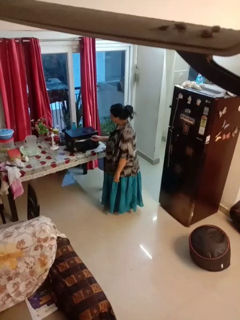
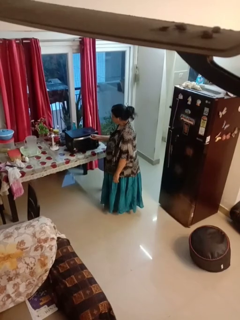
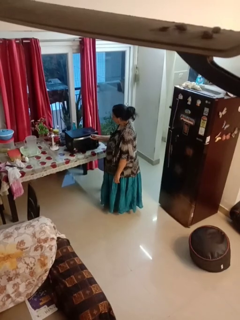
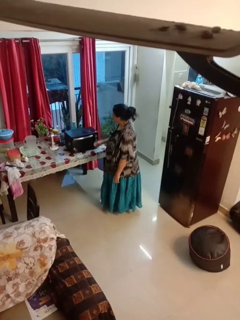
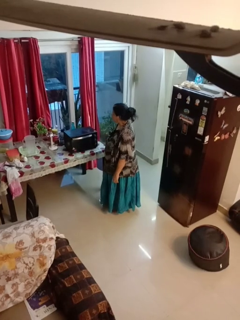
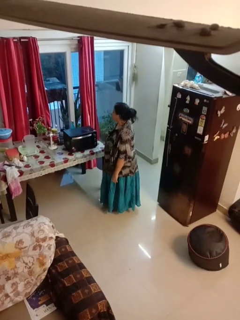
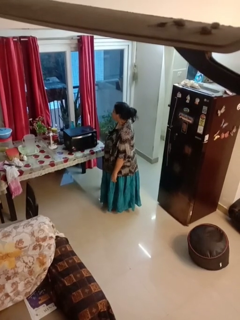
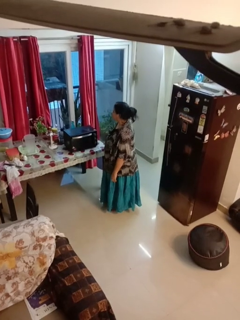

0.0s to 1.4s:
person closes microwave

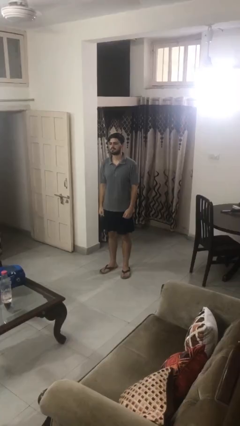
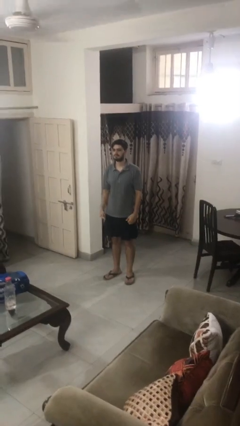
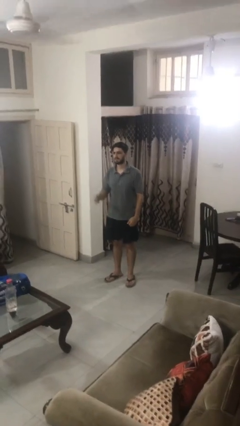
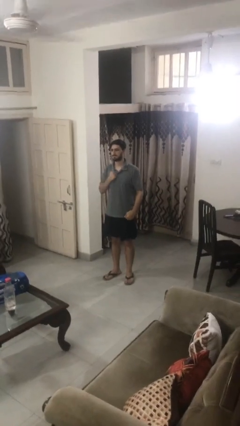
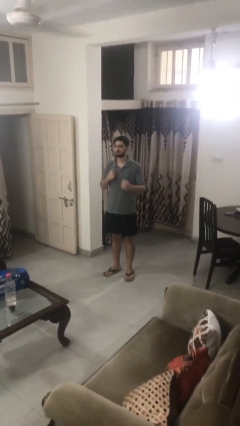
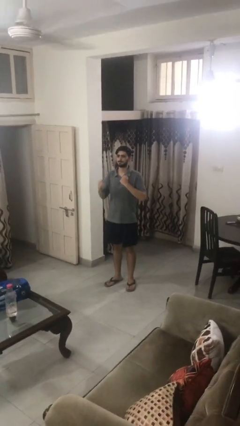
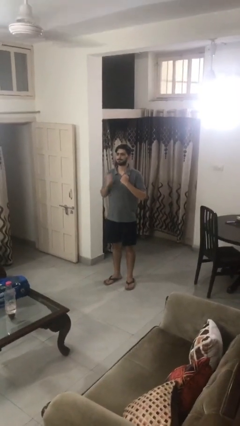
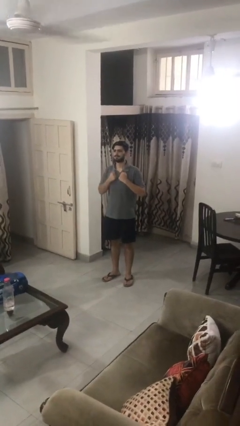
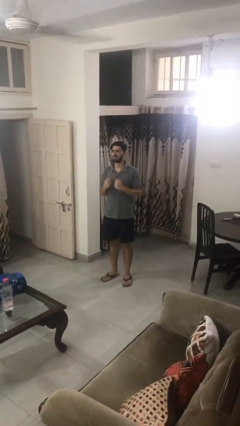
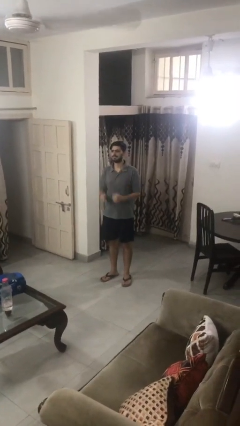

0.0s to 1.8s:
person drums on chest

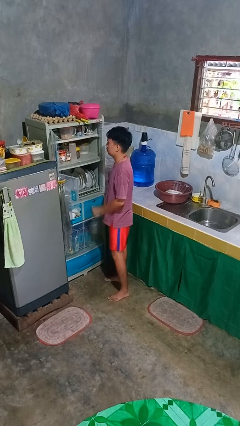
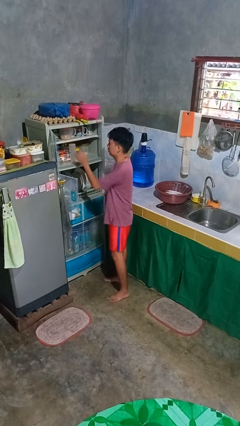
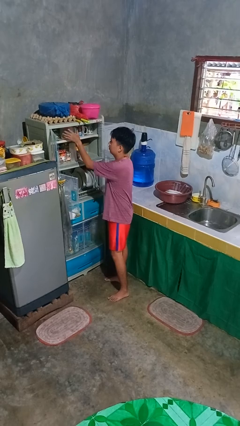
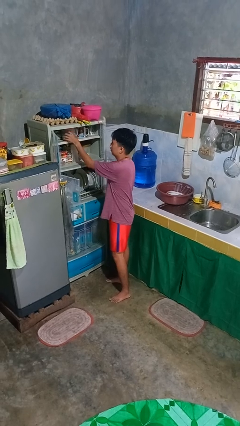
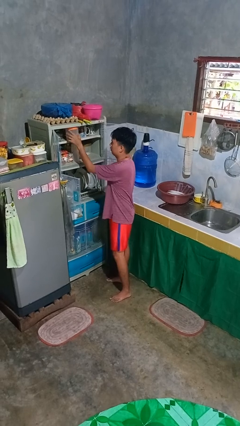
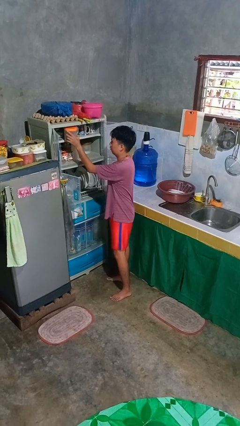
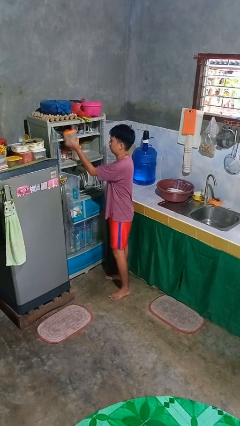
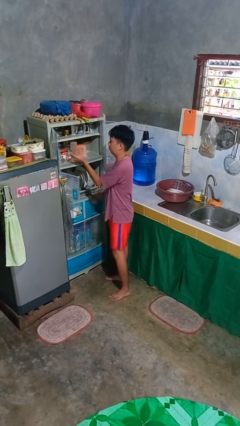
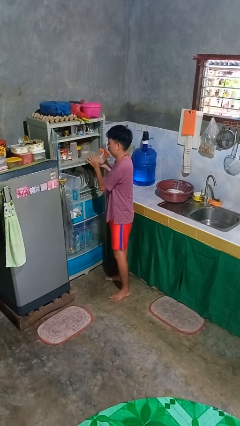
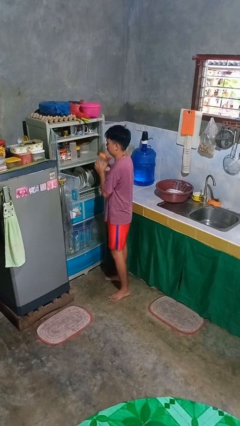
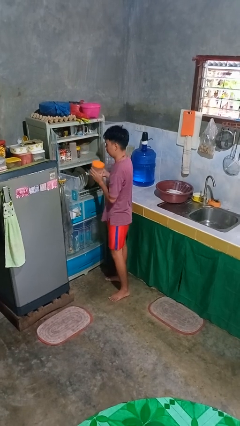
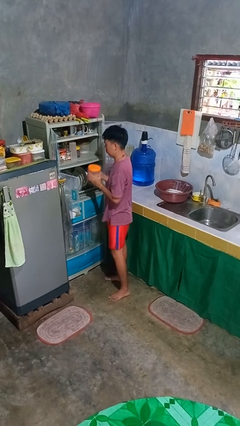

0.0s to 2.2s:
person takes object from cabinet

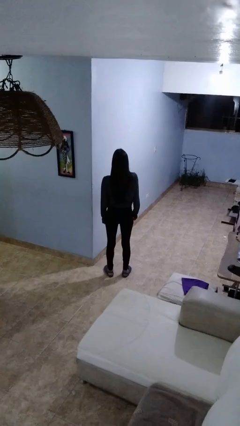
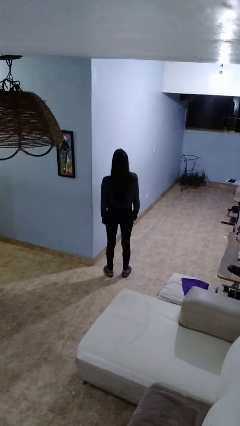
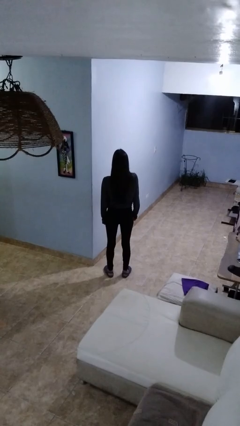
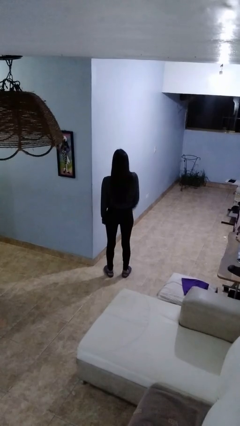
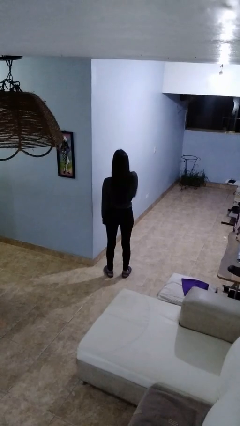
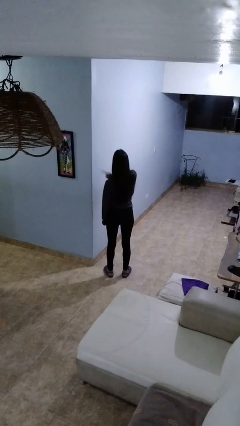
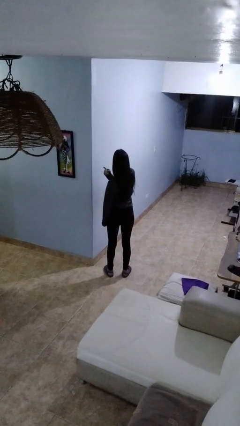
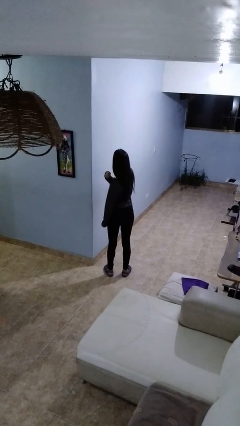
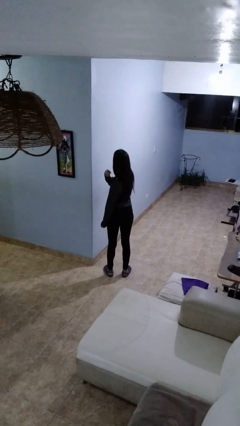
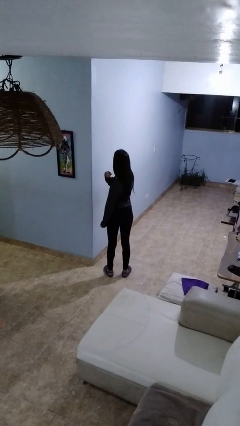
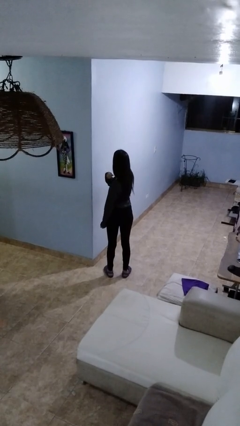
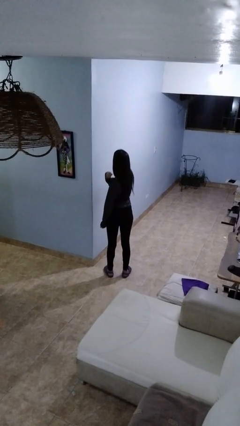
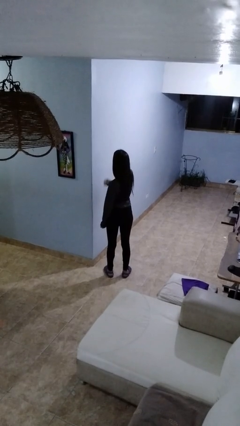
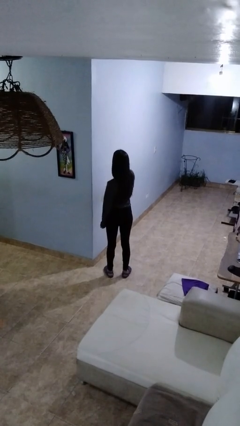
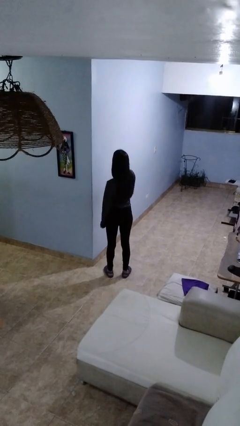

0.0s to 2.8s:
person gestures behind me

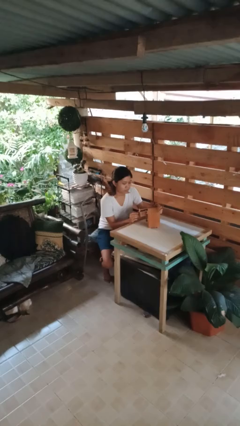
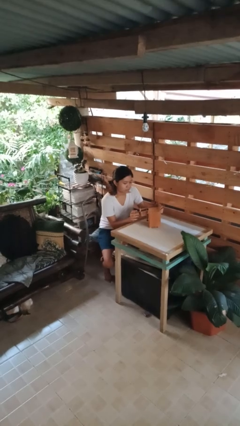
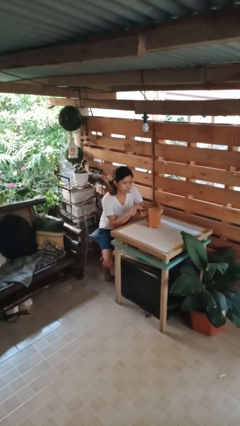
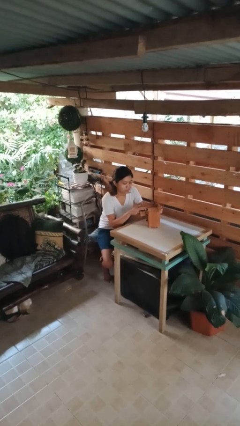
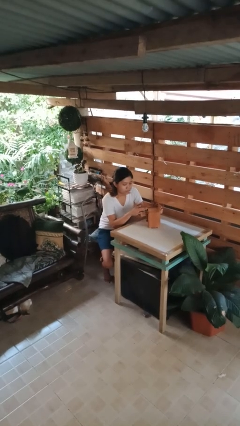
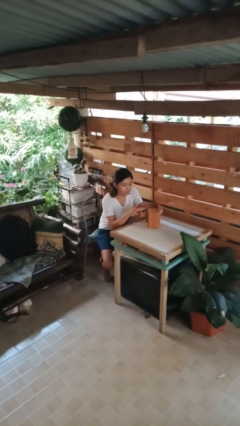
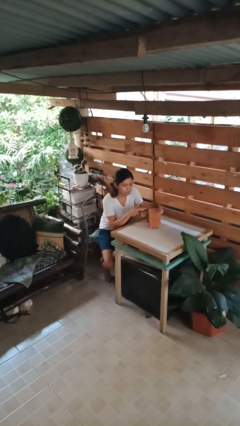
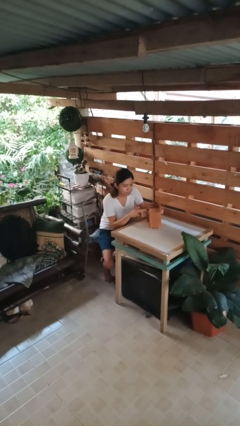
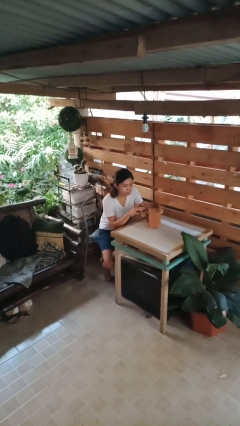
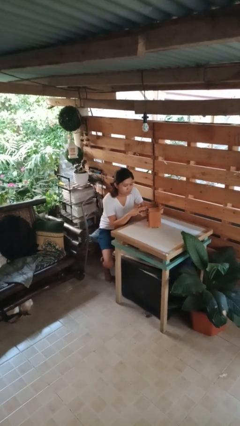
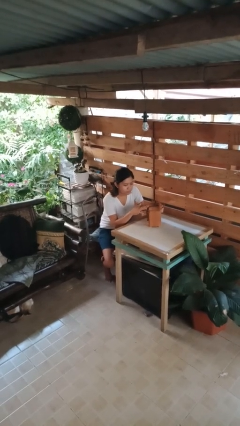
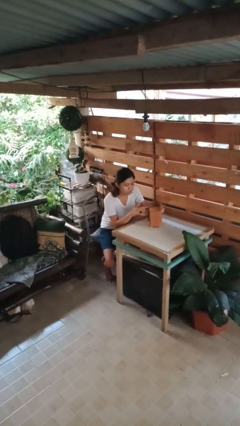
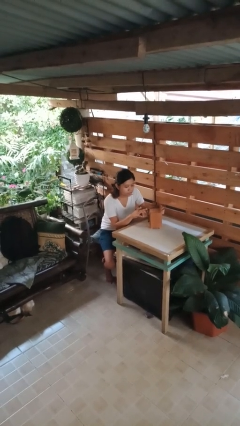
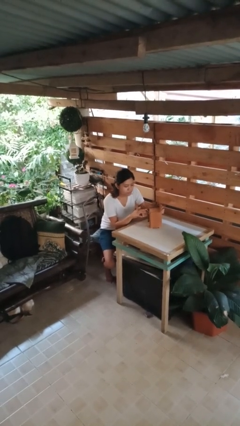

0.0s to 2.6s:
person searches jewelry box

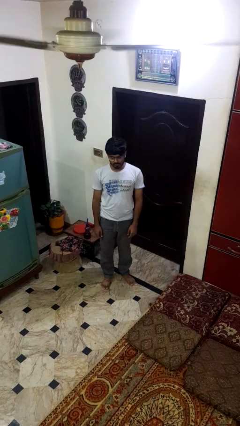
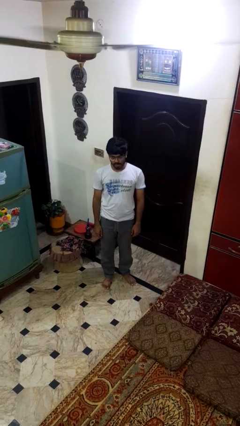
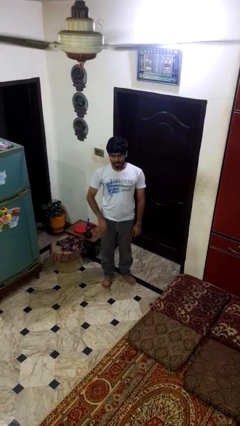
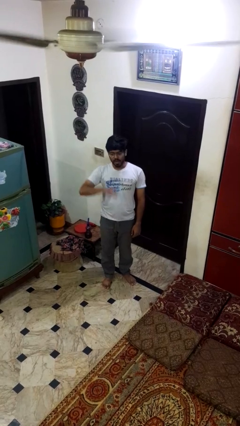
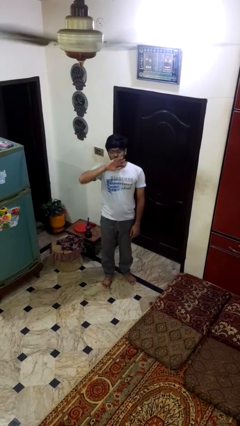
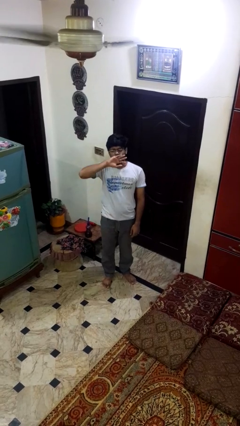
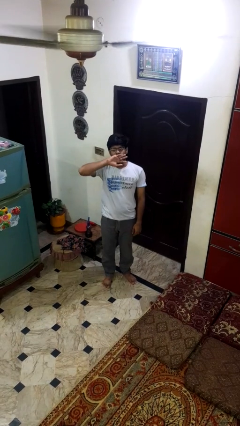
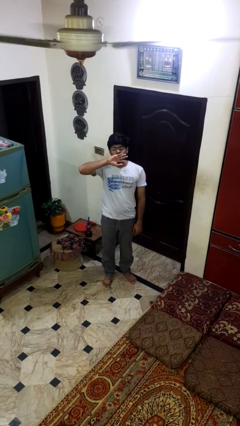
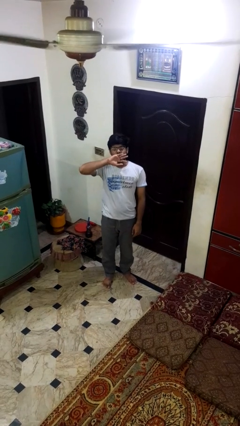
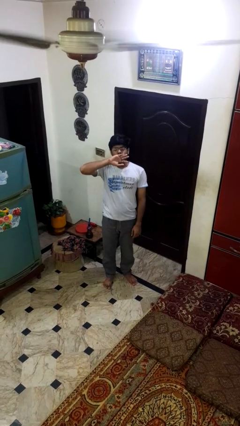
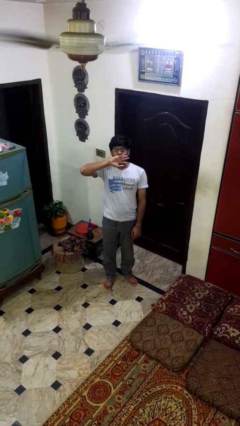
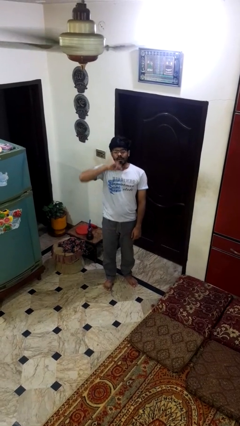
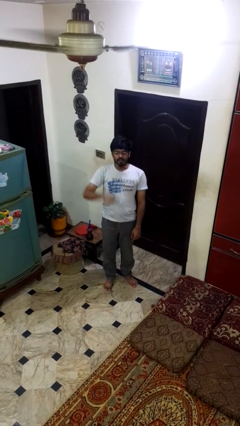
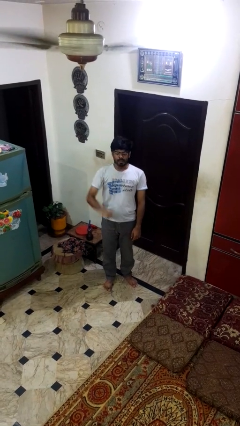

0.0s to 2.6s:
person yawns

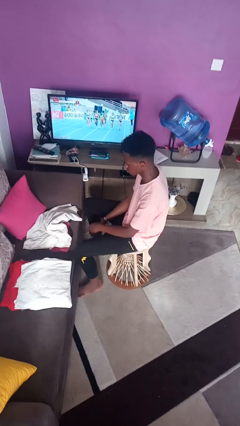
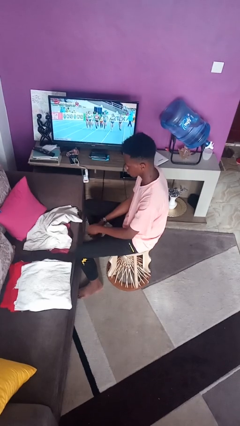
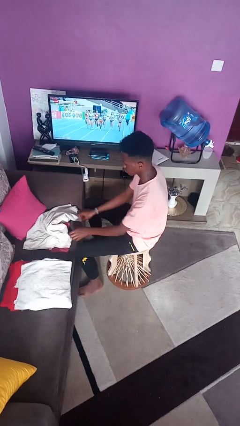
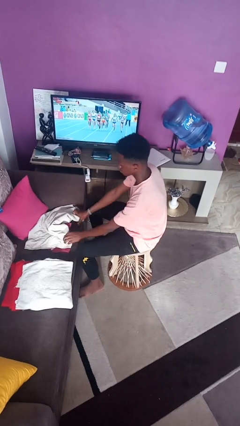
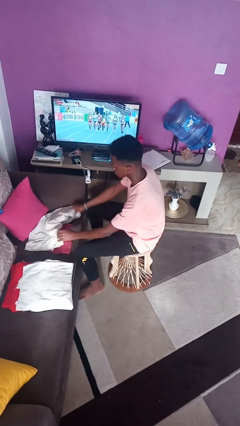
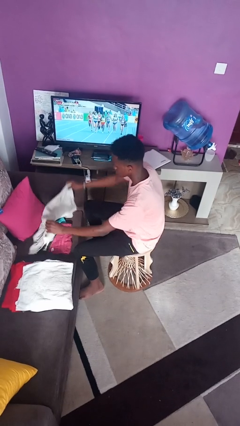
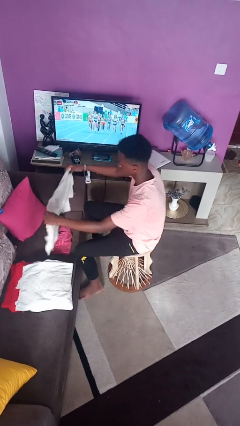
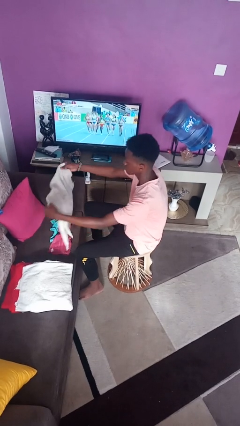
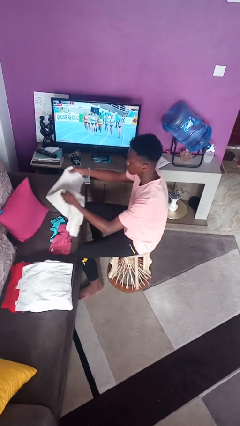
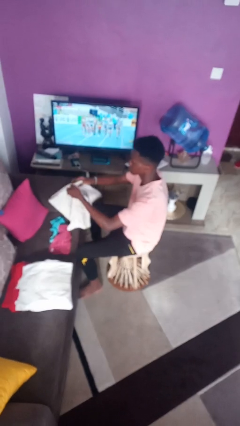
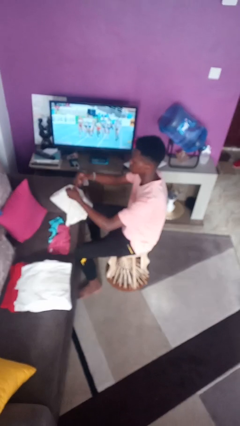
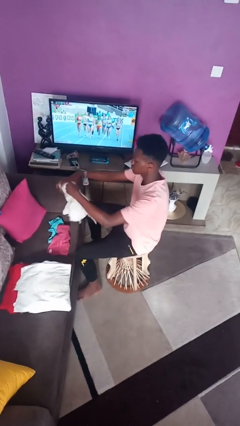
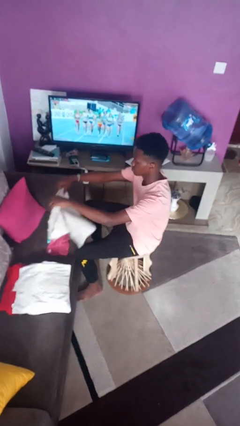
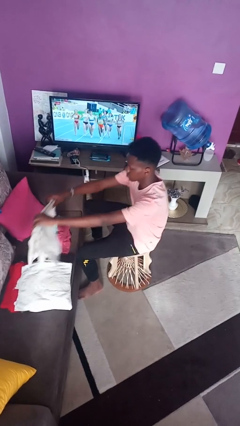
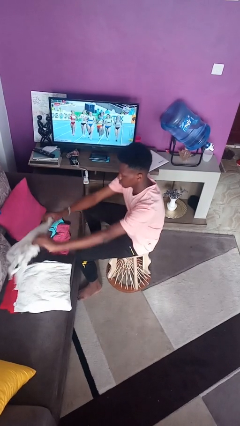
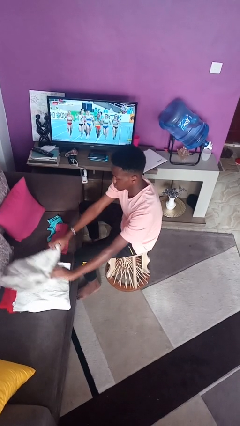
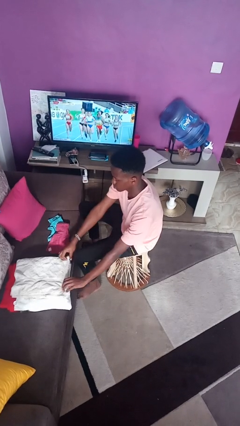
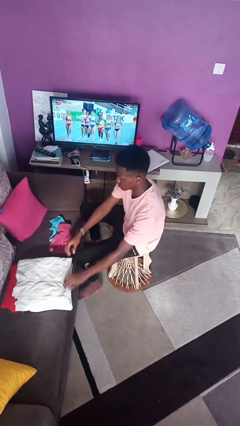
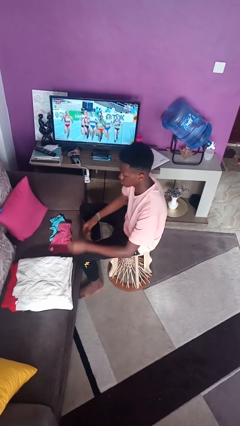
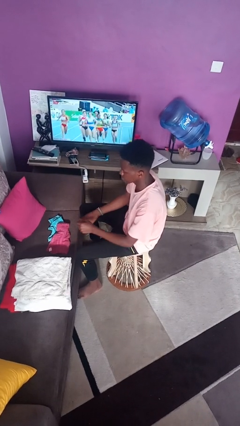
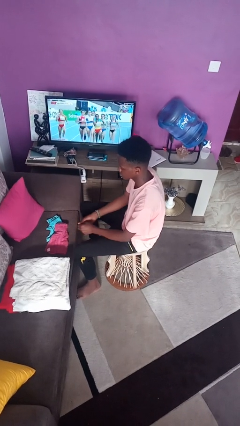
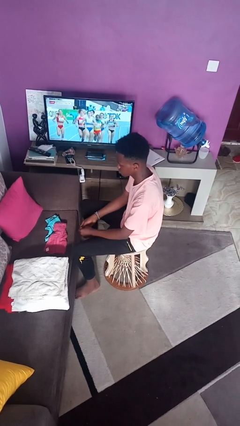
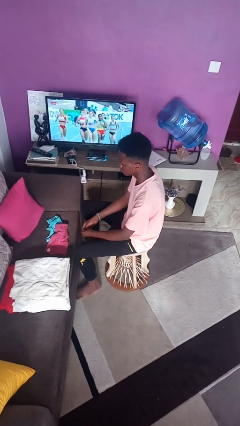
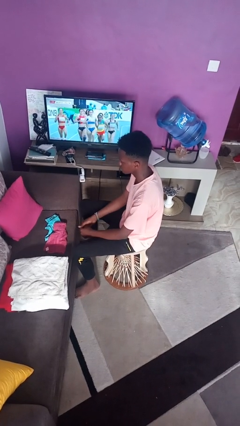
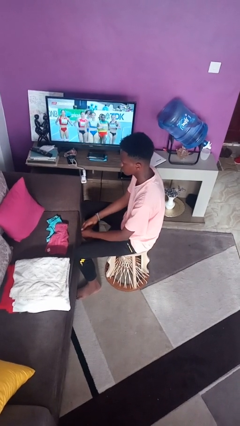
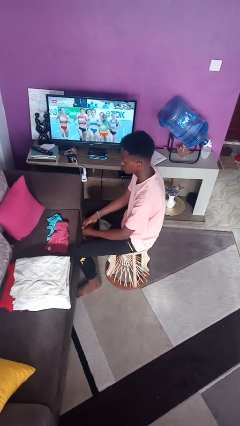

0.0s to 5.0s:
person folds towel
